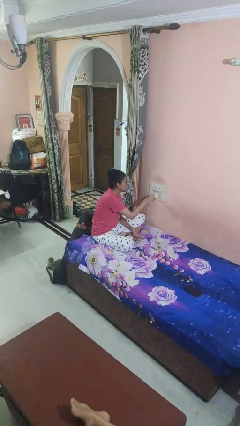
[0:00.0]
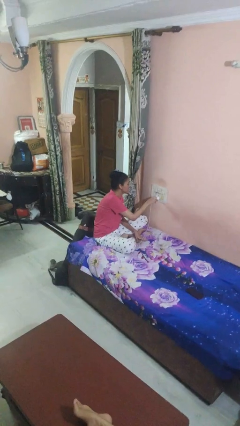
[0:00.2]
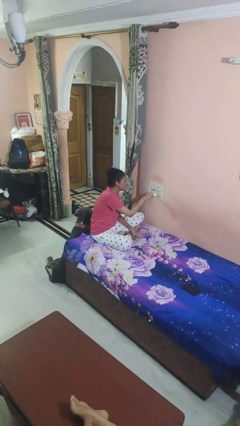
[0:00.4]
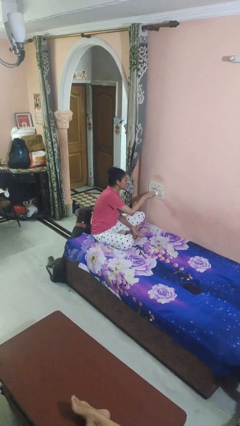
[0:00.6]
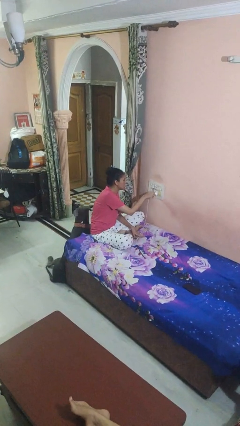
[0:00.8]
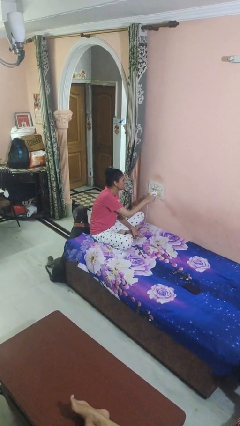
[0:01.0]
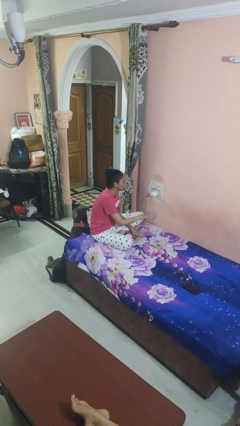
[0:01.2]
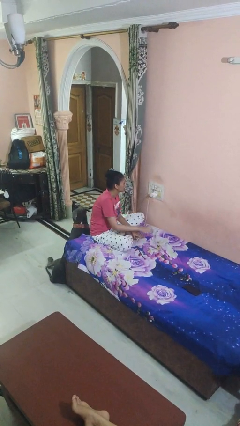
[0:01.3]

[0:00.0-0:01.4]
person plugs into electrical socket

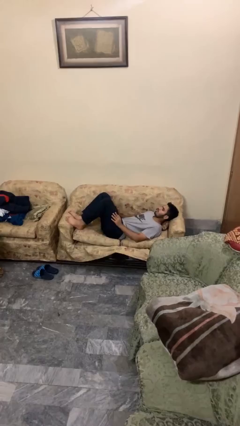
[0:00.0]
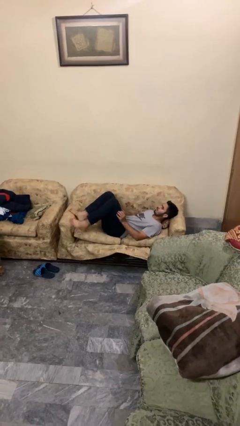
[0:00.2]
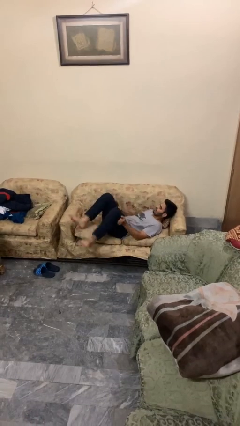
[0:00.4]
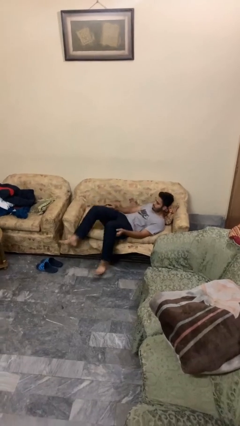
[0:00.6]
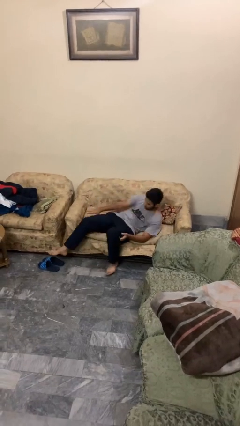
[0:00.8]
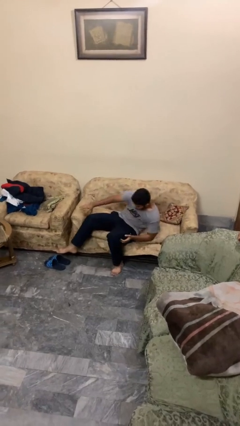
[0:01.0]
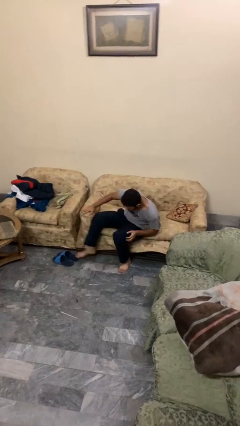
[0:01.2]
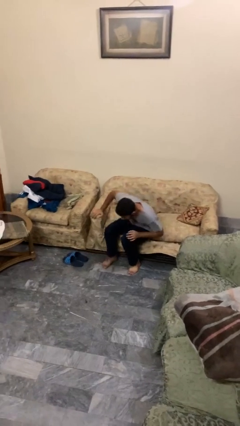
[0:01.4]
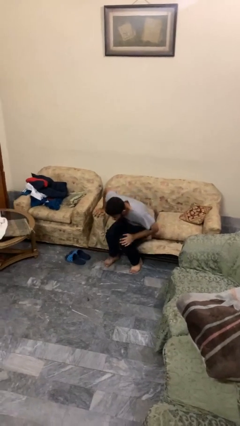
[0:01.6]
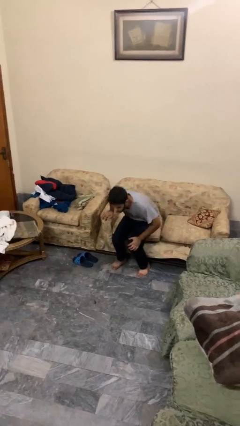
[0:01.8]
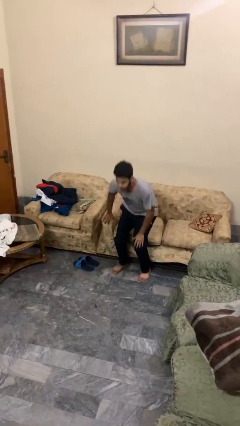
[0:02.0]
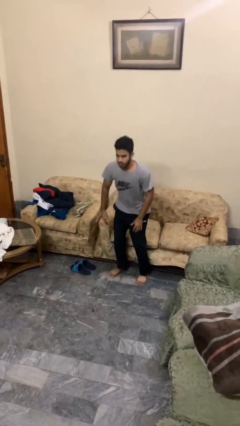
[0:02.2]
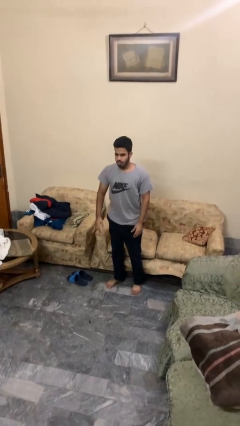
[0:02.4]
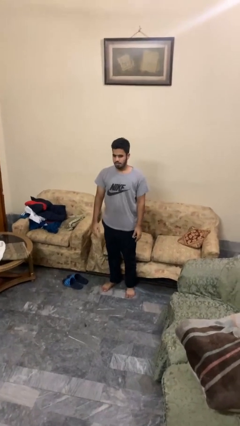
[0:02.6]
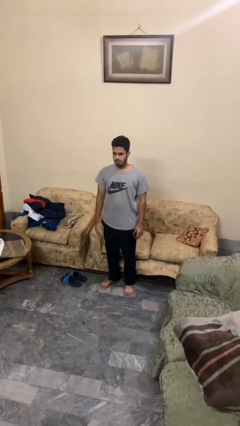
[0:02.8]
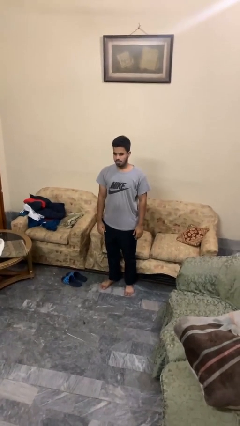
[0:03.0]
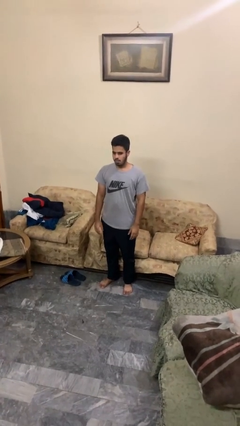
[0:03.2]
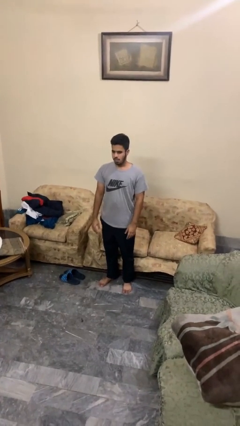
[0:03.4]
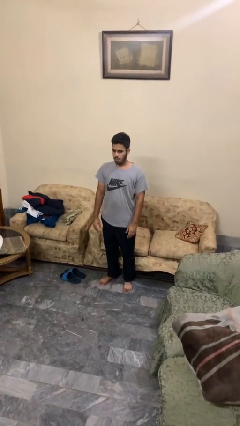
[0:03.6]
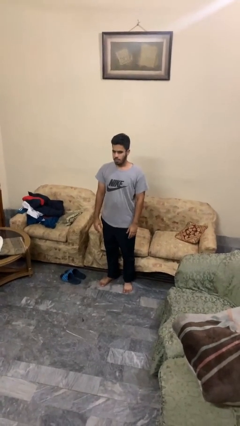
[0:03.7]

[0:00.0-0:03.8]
person stands up

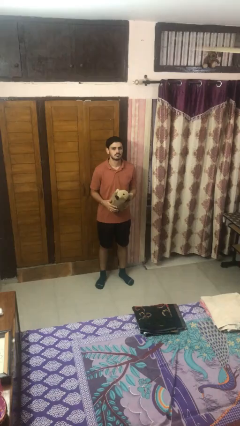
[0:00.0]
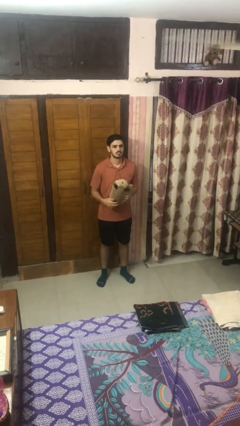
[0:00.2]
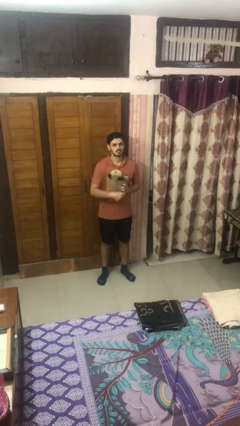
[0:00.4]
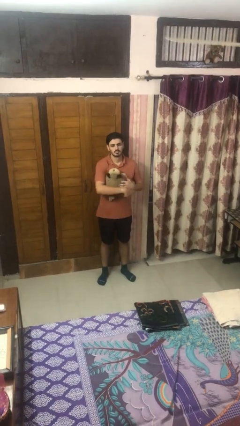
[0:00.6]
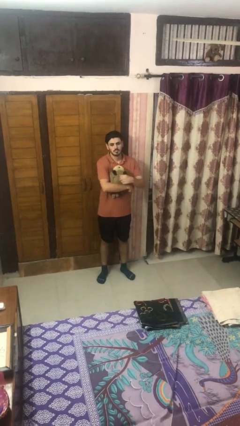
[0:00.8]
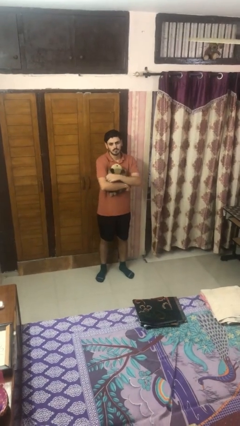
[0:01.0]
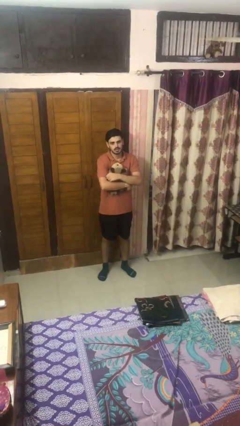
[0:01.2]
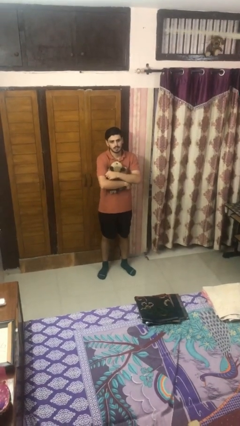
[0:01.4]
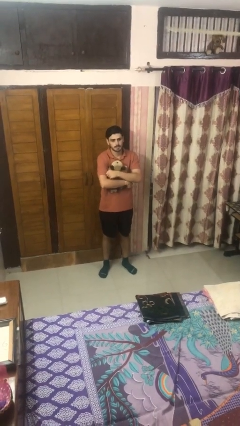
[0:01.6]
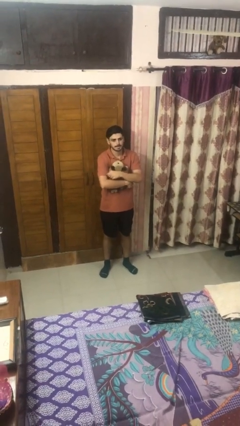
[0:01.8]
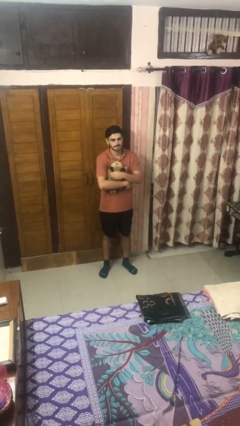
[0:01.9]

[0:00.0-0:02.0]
person hugs stuffed animal

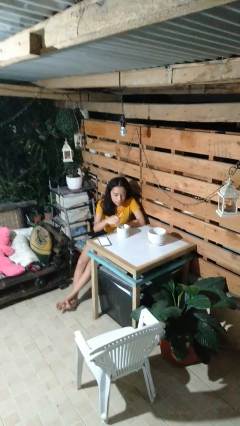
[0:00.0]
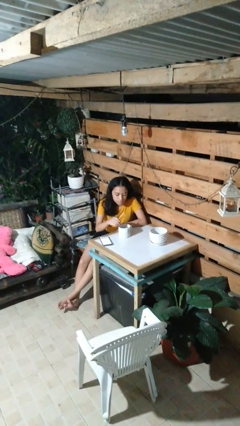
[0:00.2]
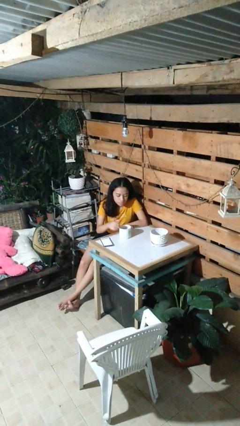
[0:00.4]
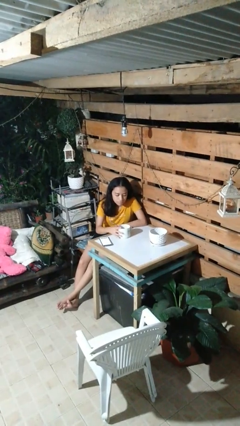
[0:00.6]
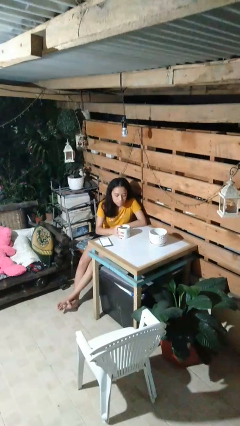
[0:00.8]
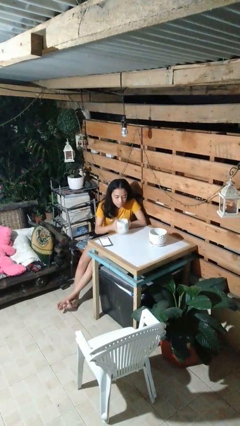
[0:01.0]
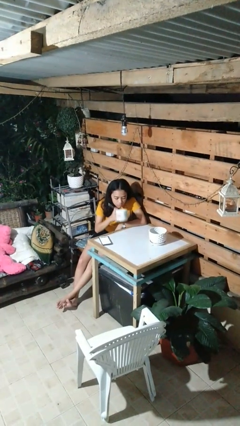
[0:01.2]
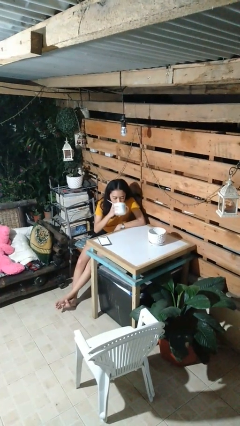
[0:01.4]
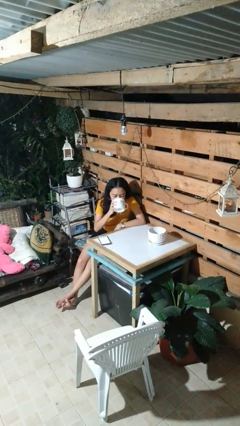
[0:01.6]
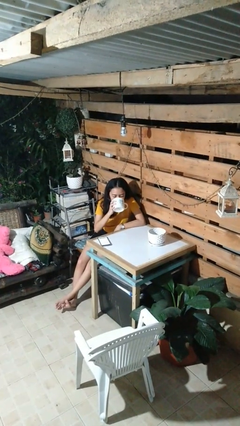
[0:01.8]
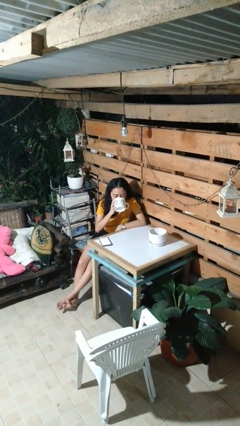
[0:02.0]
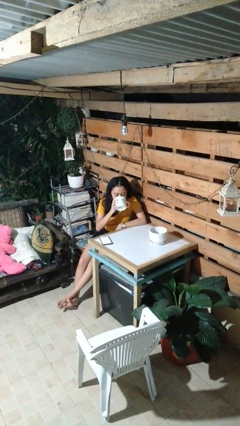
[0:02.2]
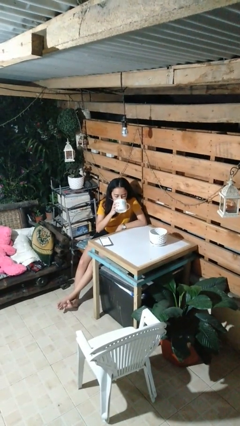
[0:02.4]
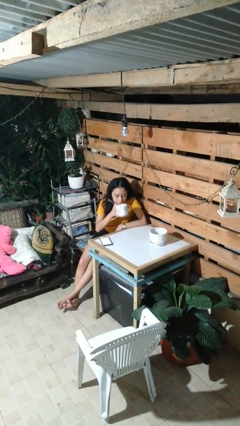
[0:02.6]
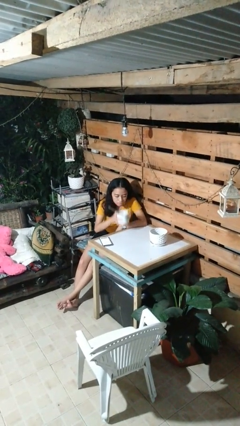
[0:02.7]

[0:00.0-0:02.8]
person drinks from mug

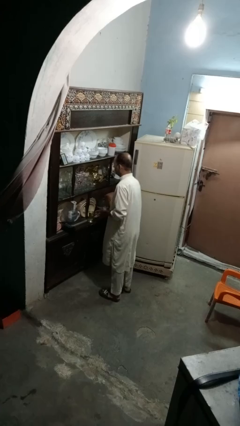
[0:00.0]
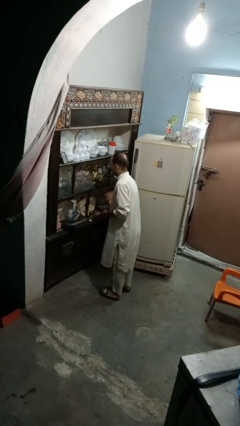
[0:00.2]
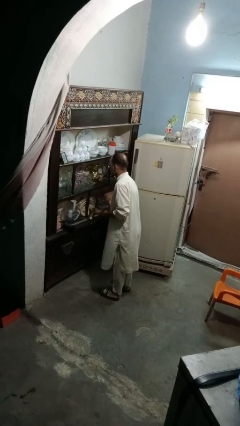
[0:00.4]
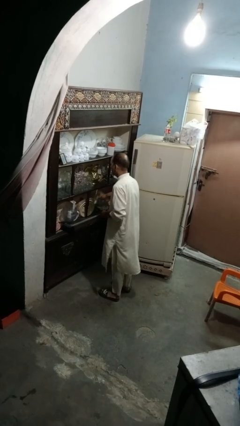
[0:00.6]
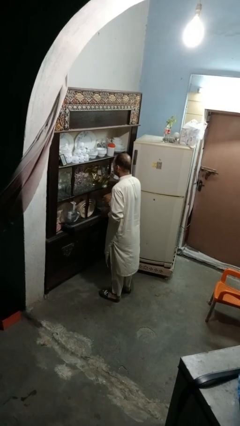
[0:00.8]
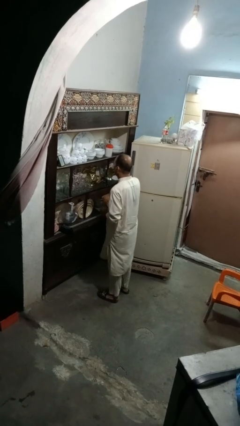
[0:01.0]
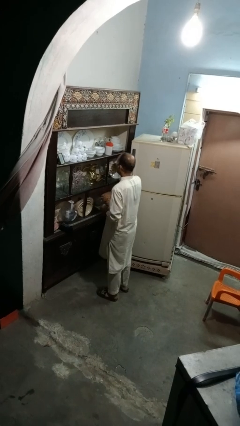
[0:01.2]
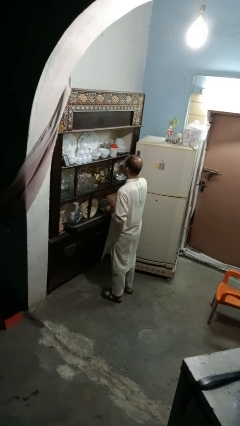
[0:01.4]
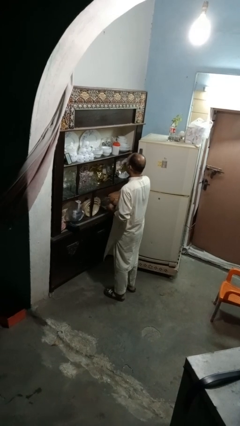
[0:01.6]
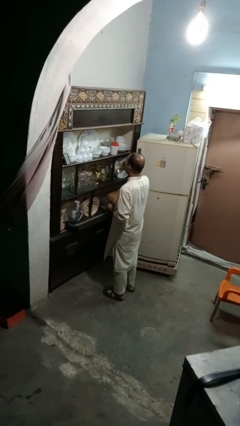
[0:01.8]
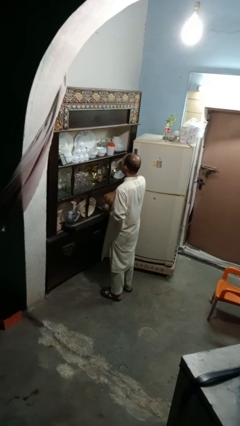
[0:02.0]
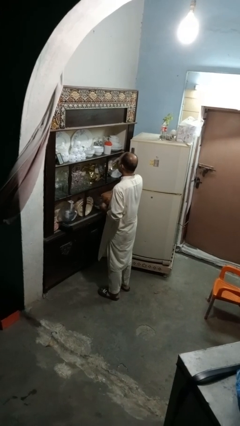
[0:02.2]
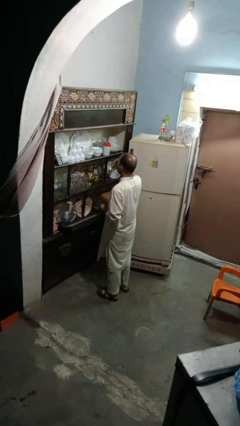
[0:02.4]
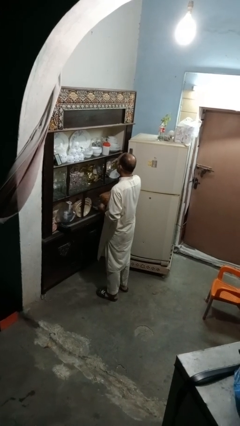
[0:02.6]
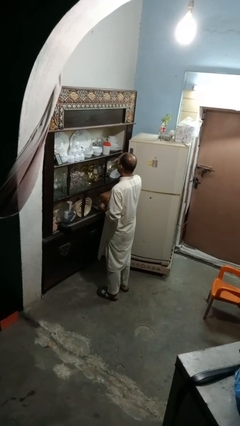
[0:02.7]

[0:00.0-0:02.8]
person drinks from cup

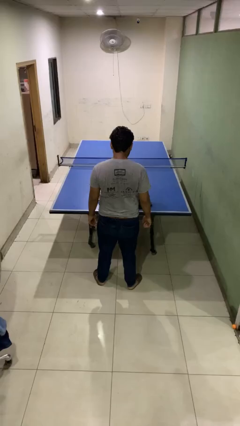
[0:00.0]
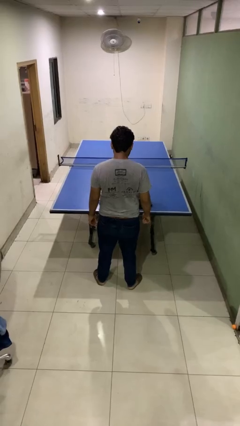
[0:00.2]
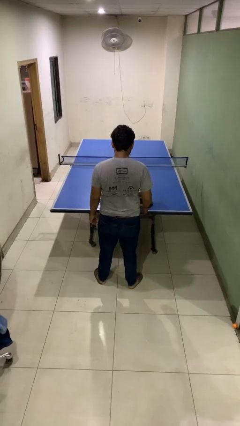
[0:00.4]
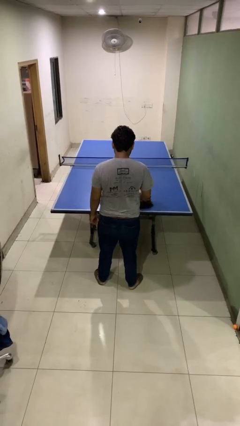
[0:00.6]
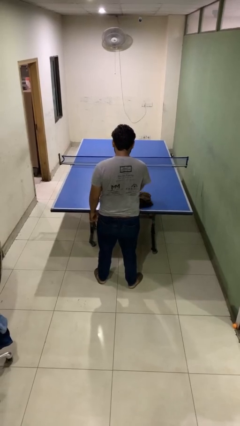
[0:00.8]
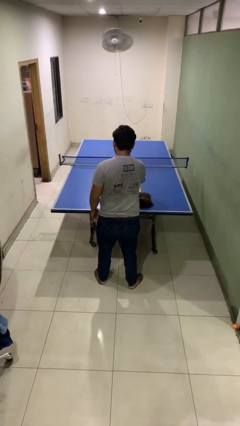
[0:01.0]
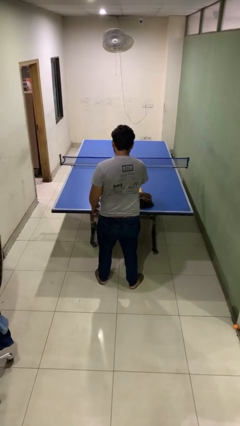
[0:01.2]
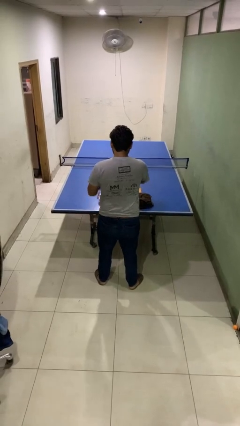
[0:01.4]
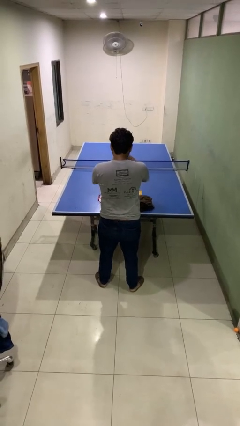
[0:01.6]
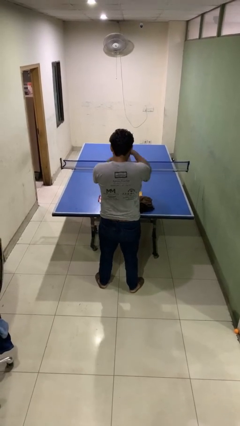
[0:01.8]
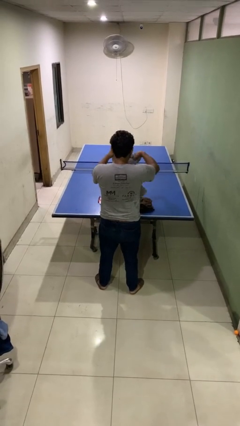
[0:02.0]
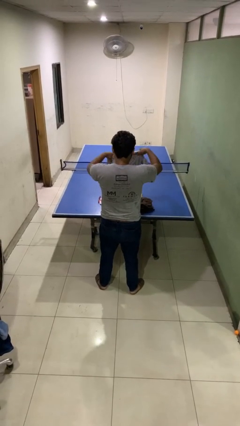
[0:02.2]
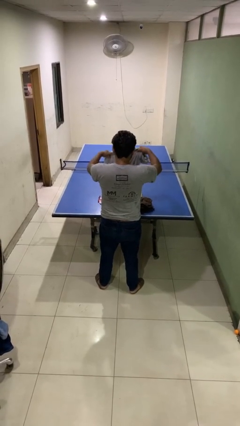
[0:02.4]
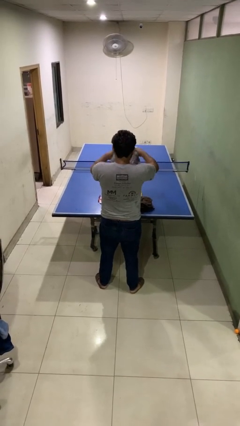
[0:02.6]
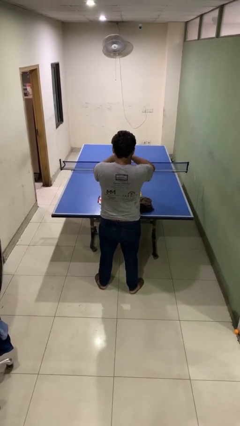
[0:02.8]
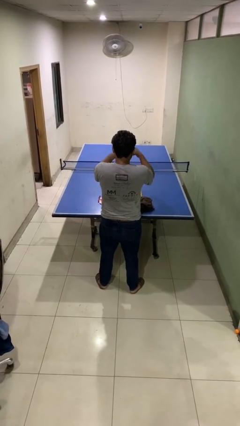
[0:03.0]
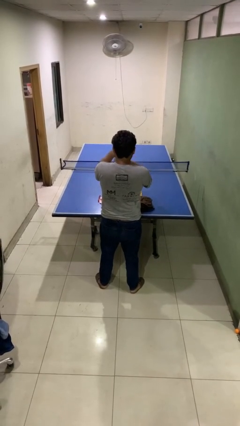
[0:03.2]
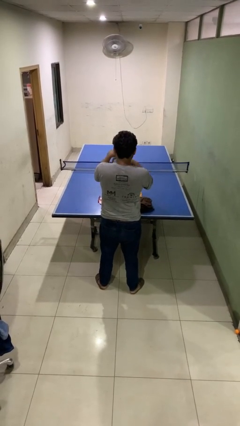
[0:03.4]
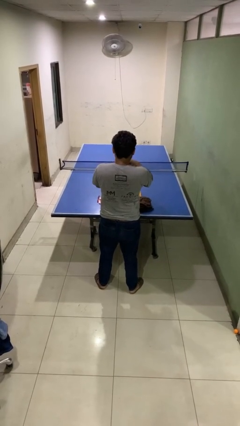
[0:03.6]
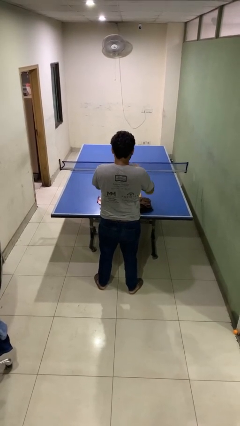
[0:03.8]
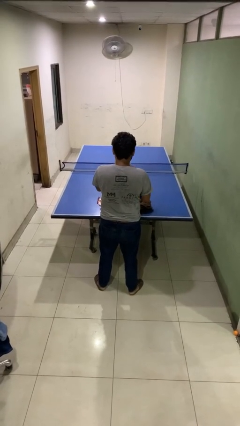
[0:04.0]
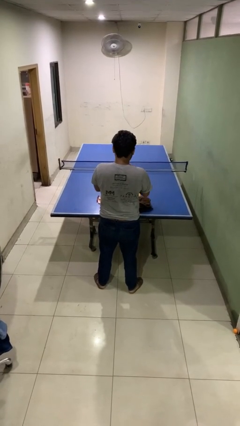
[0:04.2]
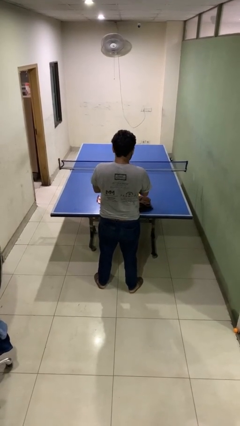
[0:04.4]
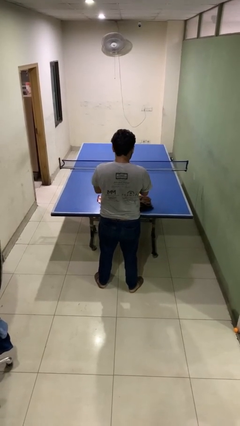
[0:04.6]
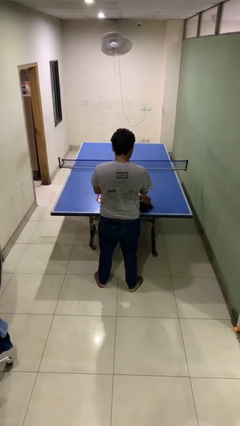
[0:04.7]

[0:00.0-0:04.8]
person folds shirt
